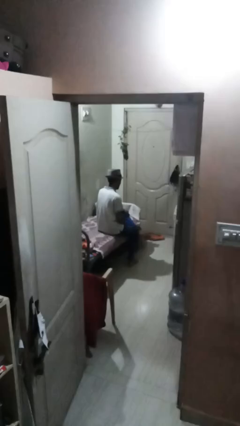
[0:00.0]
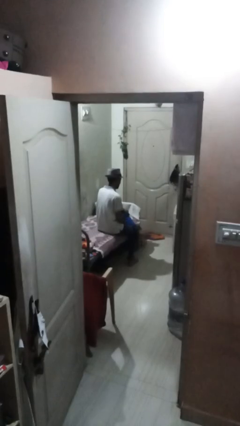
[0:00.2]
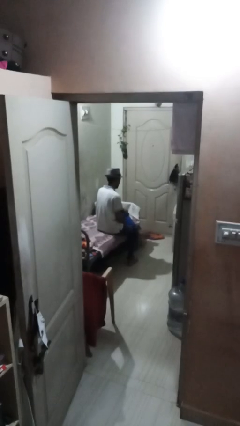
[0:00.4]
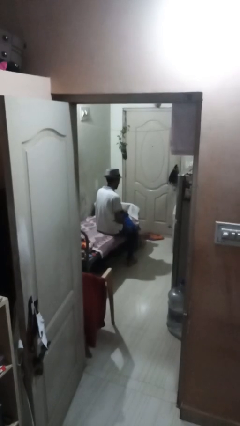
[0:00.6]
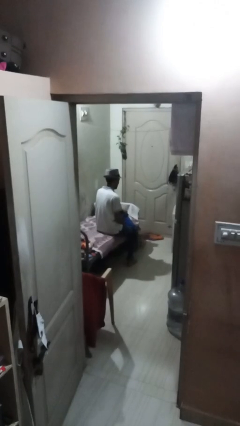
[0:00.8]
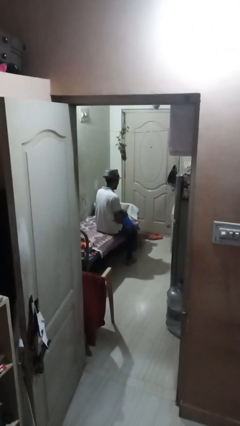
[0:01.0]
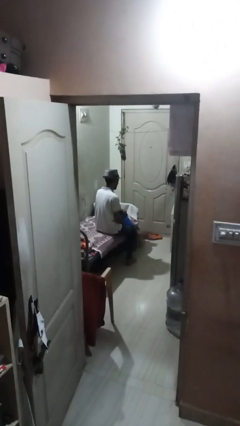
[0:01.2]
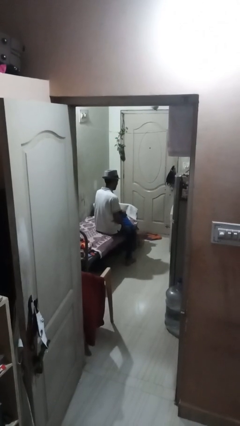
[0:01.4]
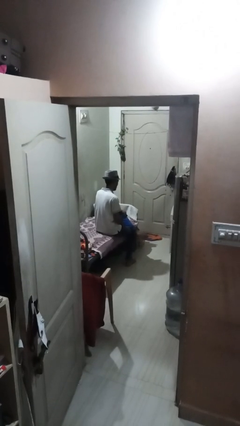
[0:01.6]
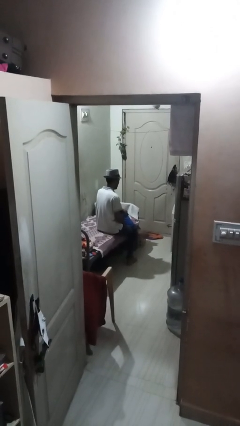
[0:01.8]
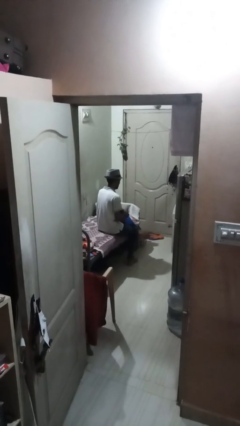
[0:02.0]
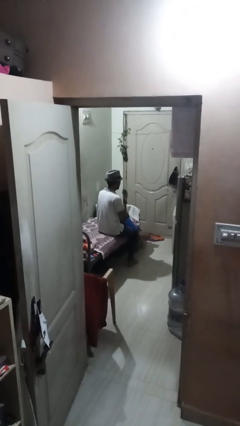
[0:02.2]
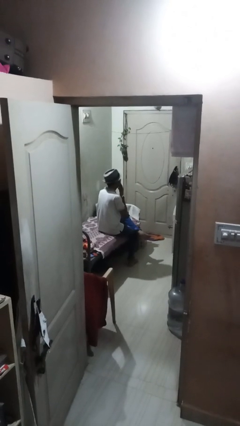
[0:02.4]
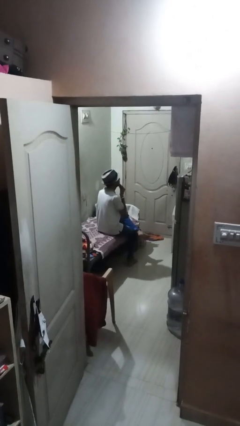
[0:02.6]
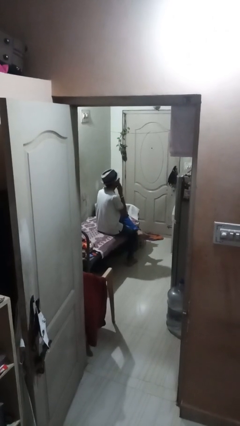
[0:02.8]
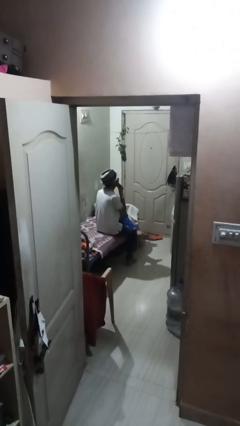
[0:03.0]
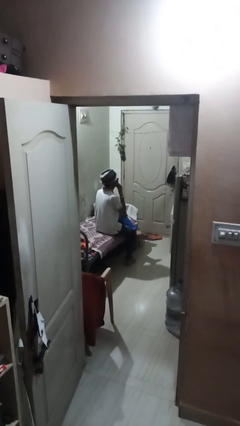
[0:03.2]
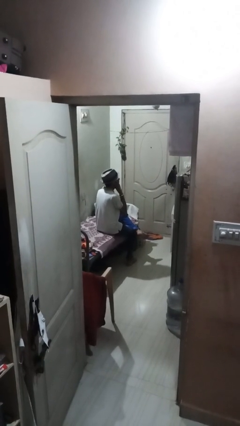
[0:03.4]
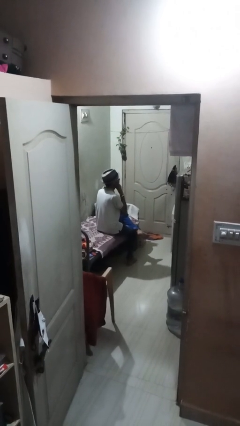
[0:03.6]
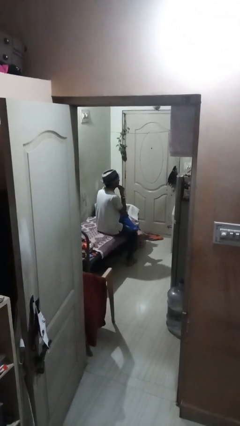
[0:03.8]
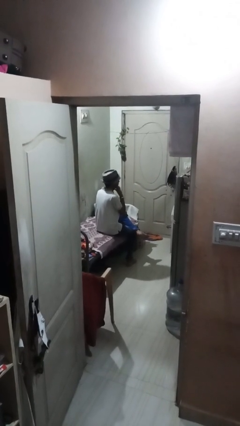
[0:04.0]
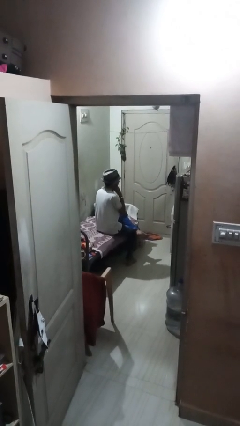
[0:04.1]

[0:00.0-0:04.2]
person strokes chin

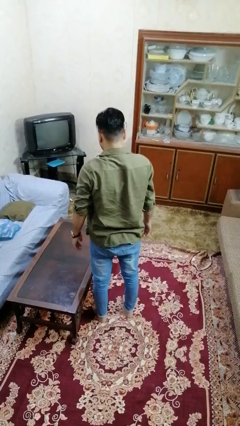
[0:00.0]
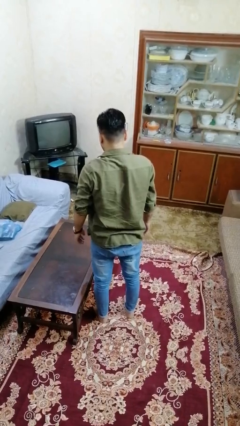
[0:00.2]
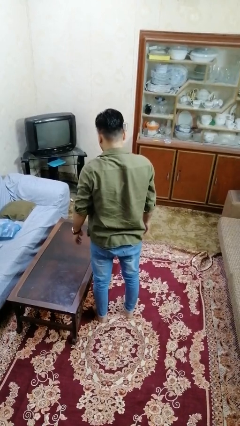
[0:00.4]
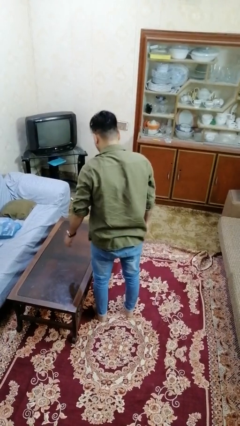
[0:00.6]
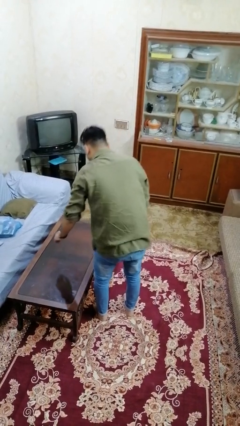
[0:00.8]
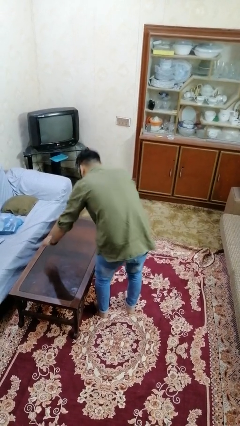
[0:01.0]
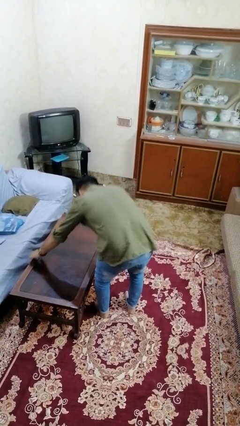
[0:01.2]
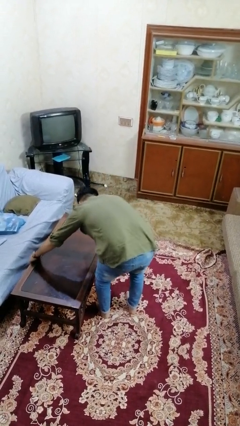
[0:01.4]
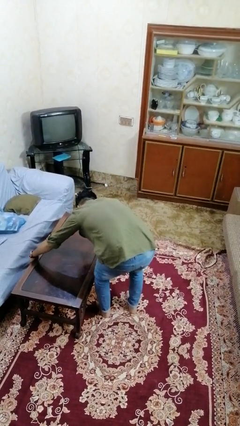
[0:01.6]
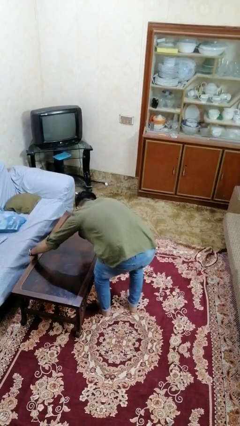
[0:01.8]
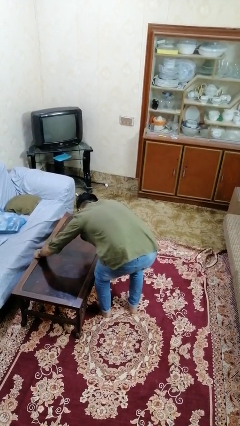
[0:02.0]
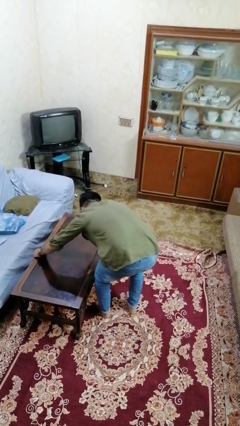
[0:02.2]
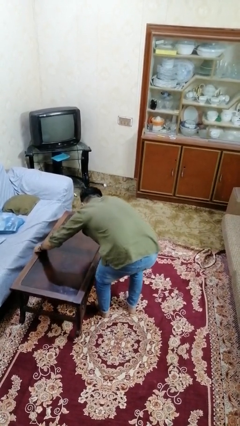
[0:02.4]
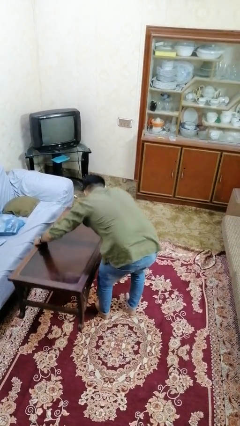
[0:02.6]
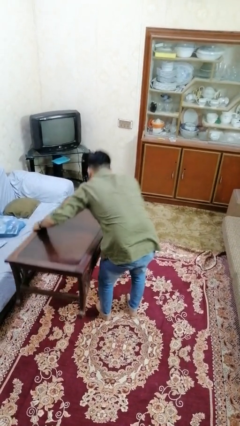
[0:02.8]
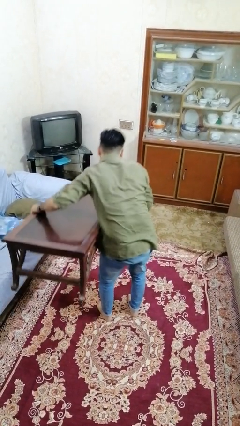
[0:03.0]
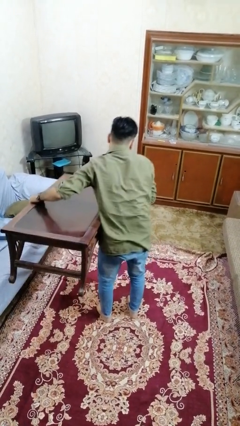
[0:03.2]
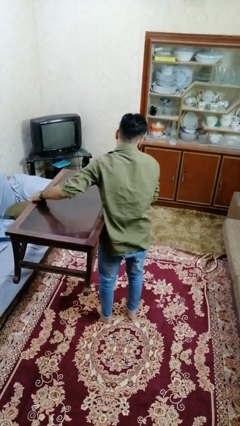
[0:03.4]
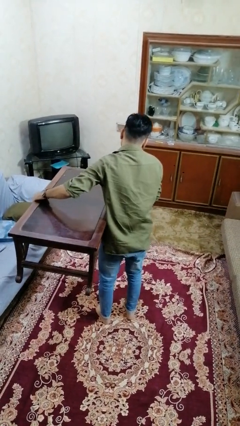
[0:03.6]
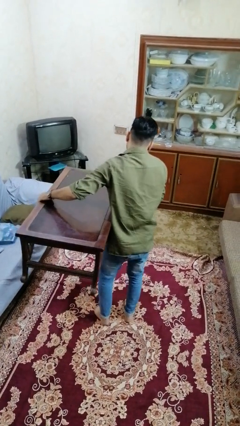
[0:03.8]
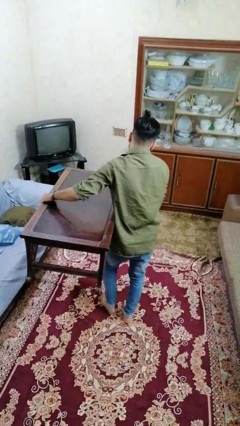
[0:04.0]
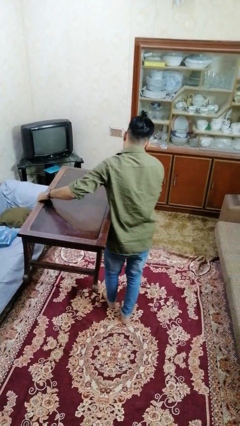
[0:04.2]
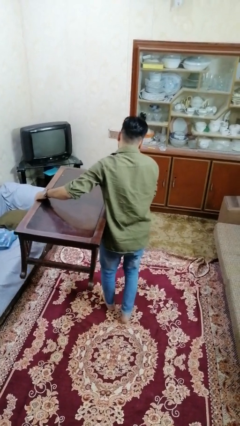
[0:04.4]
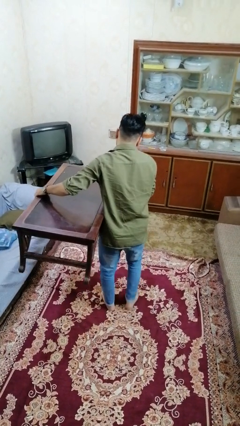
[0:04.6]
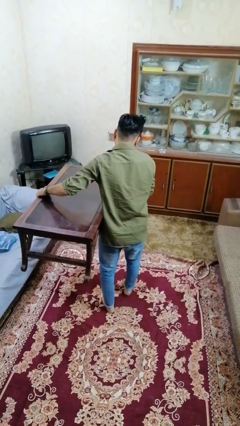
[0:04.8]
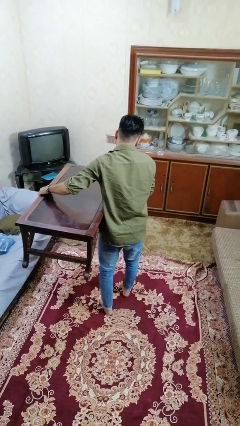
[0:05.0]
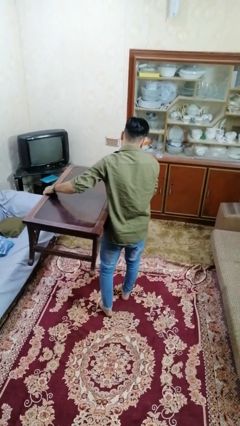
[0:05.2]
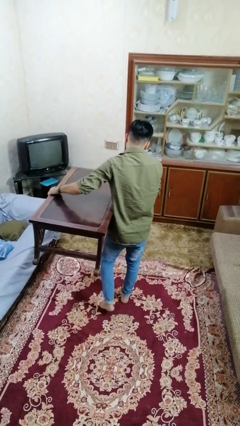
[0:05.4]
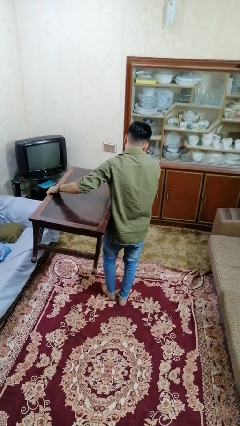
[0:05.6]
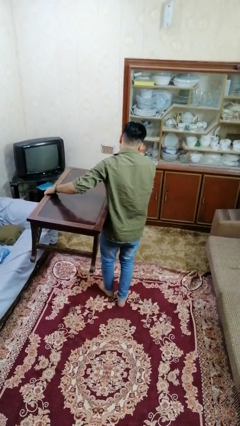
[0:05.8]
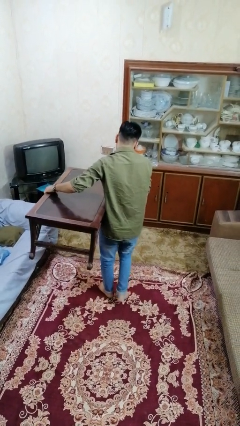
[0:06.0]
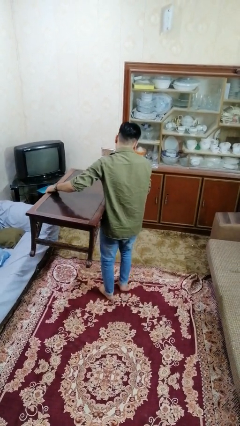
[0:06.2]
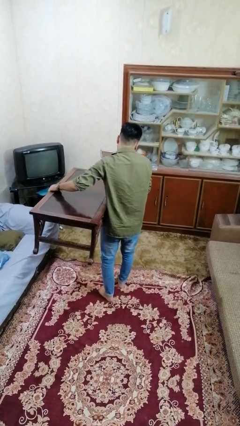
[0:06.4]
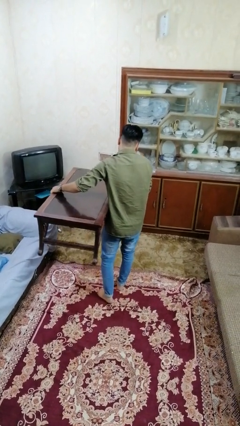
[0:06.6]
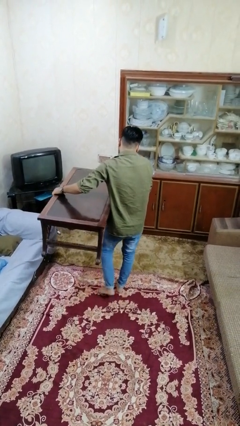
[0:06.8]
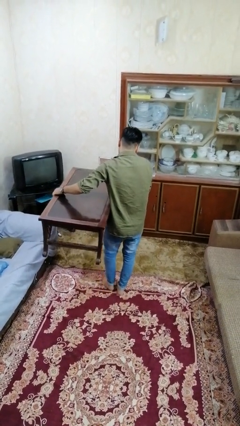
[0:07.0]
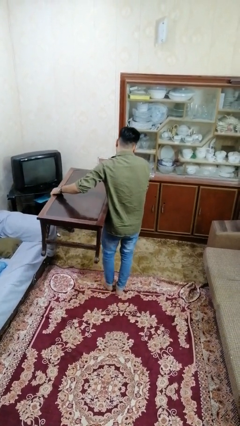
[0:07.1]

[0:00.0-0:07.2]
person carries furniture

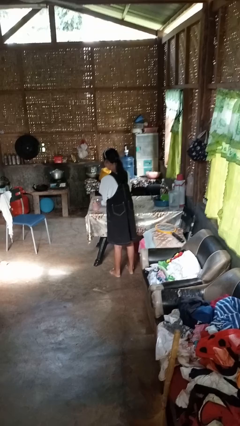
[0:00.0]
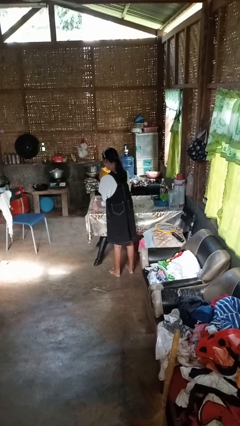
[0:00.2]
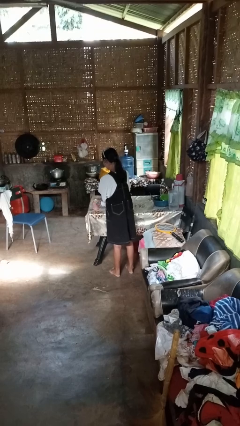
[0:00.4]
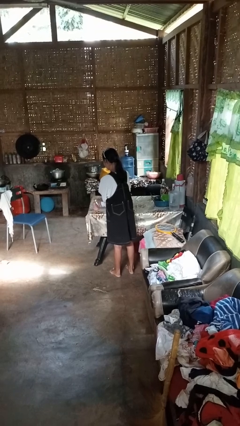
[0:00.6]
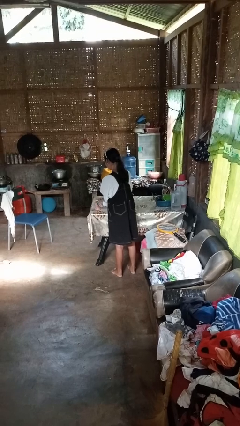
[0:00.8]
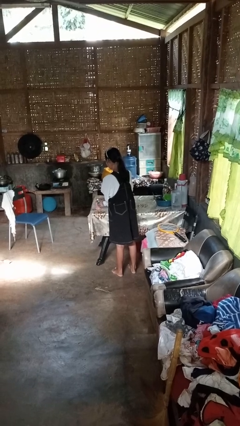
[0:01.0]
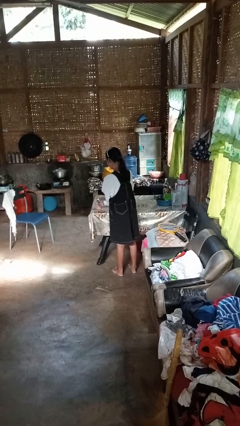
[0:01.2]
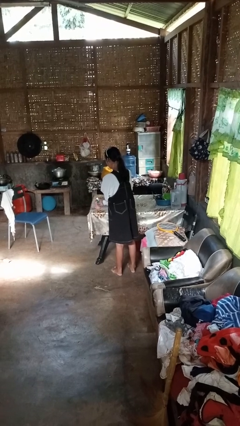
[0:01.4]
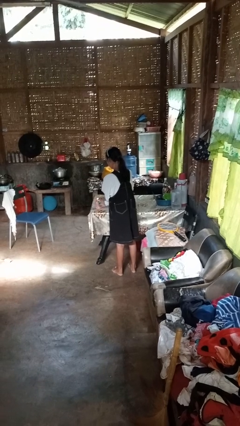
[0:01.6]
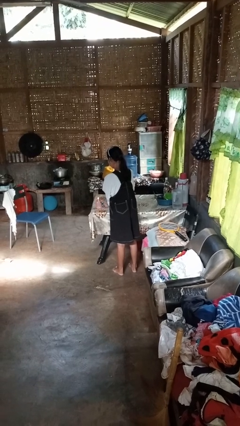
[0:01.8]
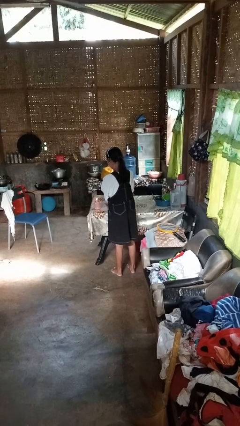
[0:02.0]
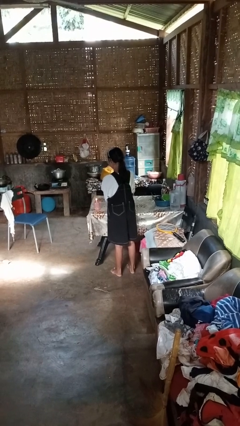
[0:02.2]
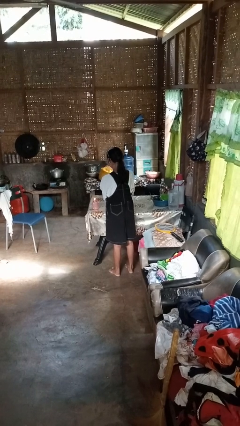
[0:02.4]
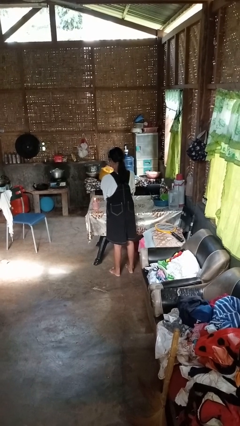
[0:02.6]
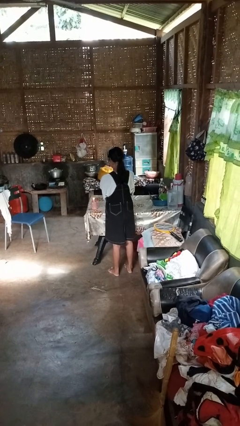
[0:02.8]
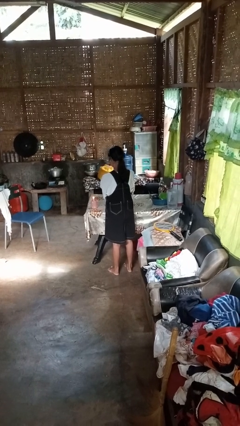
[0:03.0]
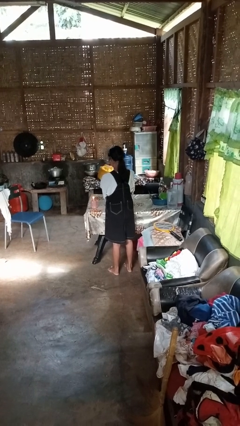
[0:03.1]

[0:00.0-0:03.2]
person lights candle

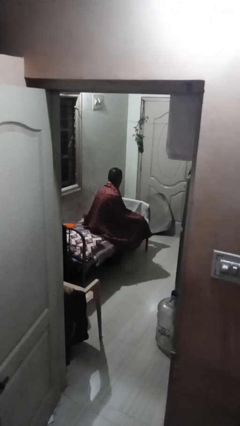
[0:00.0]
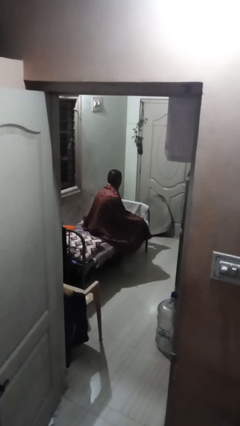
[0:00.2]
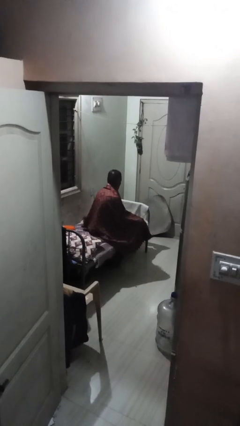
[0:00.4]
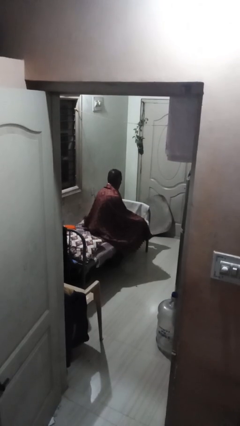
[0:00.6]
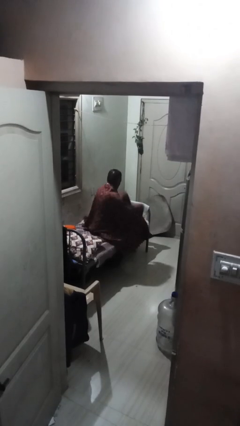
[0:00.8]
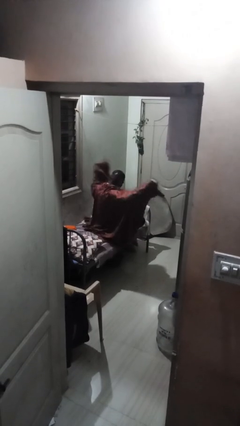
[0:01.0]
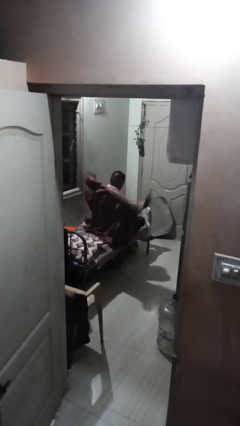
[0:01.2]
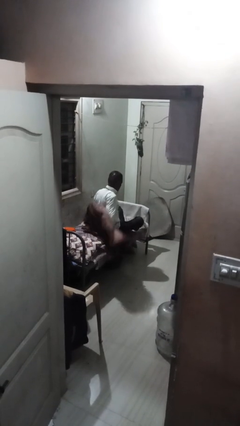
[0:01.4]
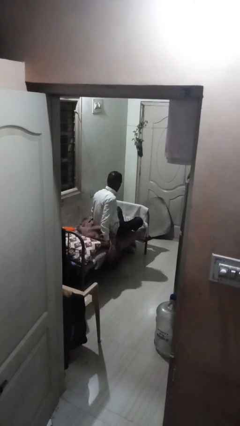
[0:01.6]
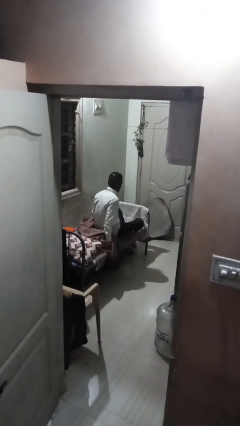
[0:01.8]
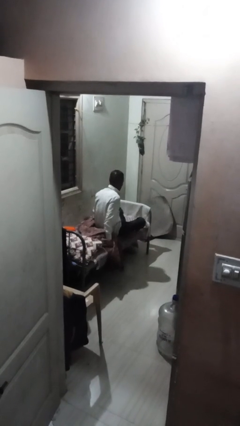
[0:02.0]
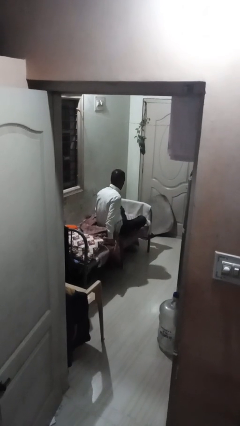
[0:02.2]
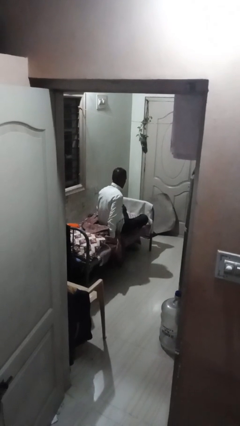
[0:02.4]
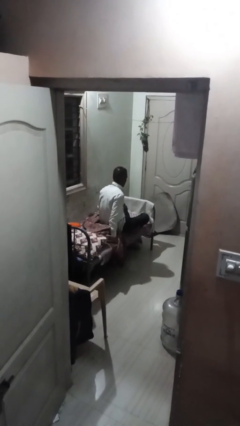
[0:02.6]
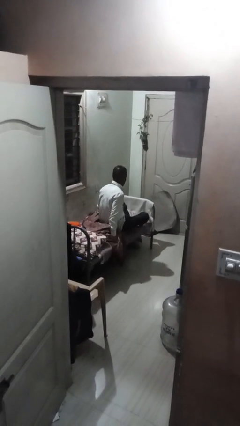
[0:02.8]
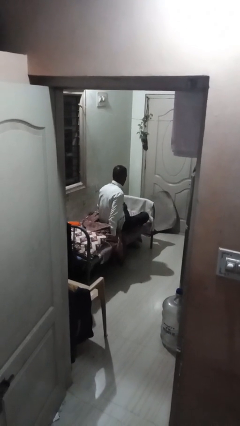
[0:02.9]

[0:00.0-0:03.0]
person uncovers with blanket

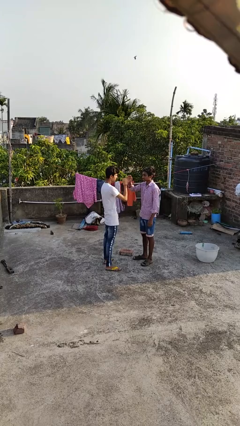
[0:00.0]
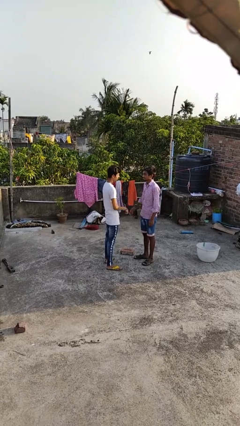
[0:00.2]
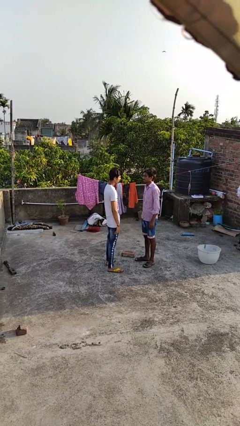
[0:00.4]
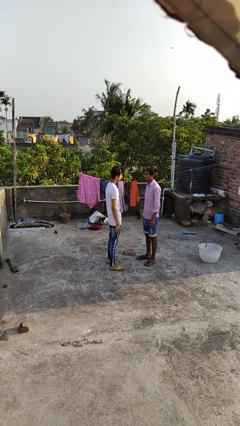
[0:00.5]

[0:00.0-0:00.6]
person highfives hand
